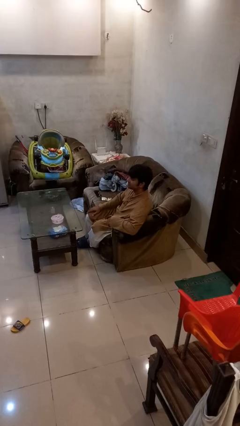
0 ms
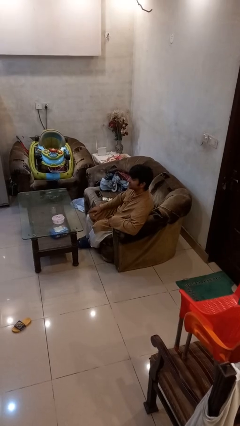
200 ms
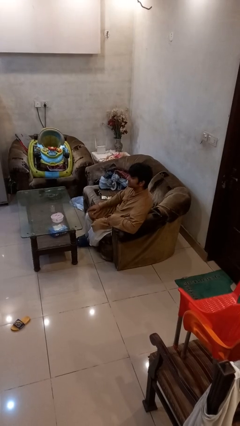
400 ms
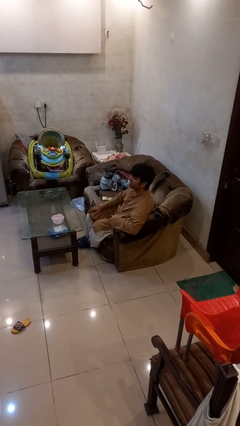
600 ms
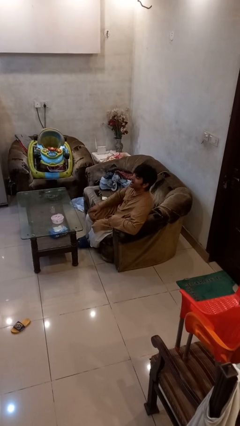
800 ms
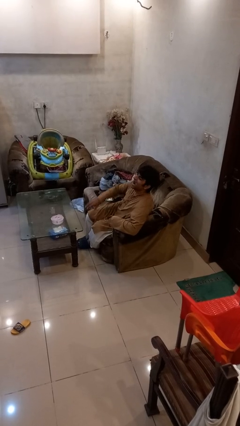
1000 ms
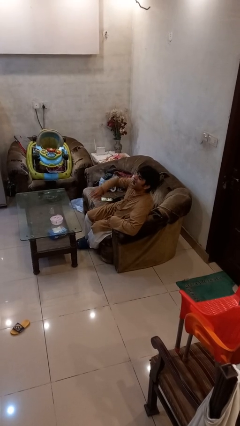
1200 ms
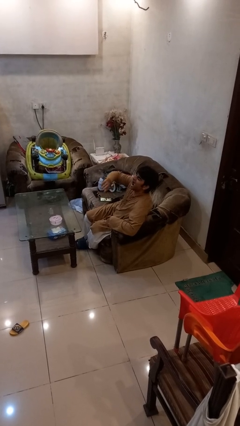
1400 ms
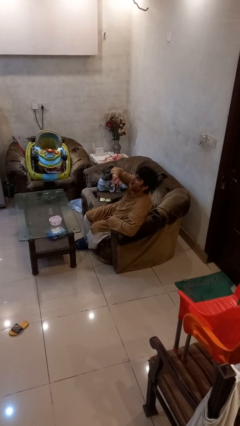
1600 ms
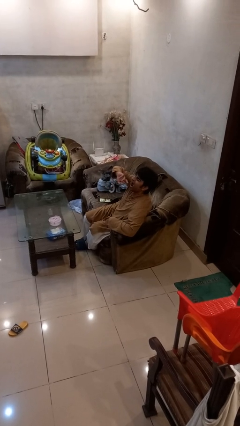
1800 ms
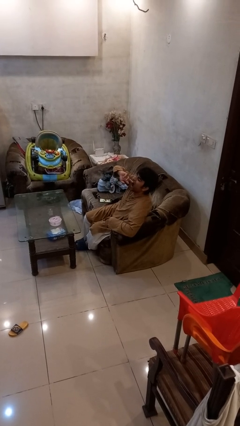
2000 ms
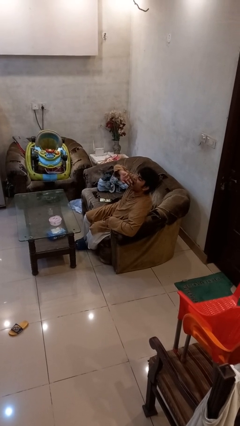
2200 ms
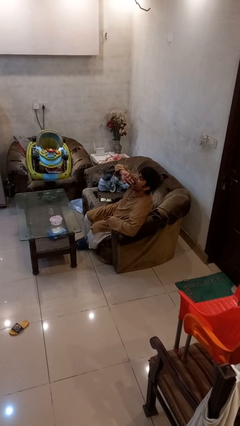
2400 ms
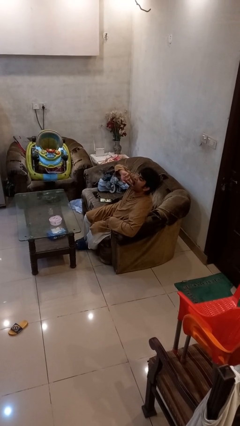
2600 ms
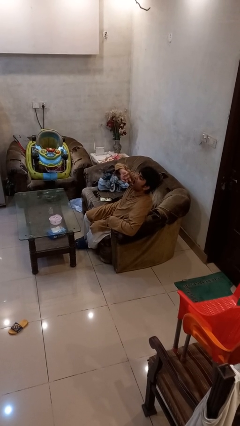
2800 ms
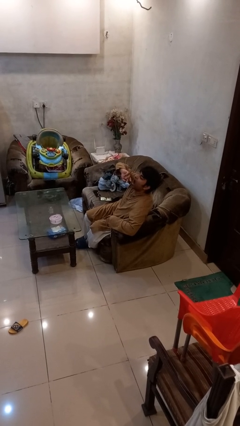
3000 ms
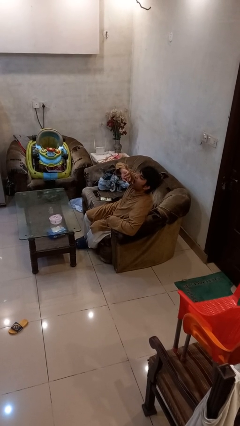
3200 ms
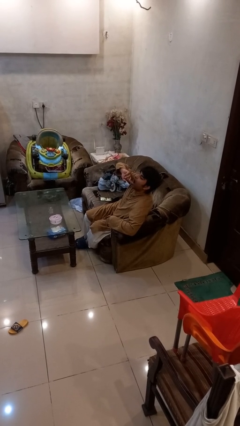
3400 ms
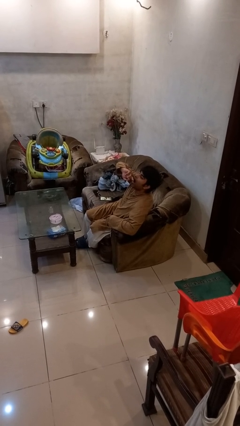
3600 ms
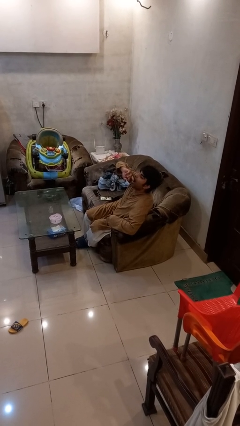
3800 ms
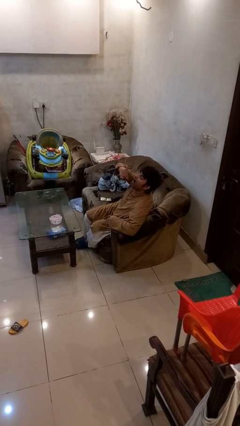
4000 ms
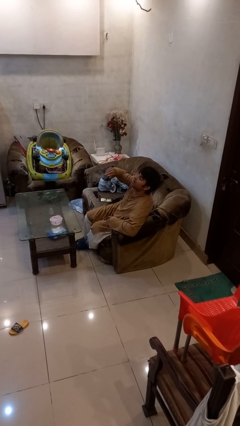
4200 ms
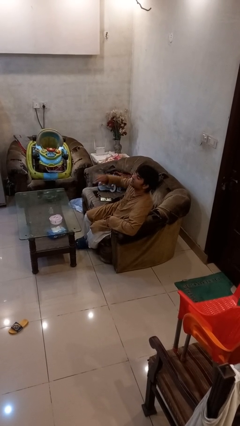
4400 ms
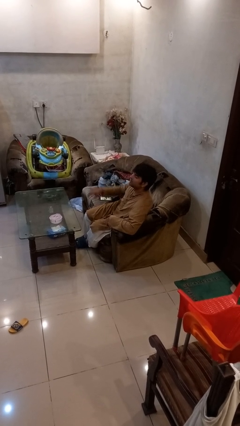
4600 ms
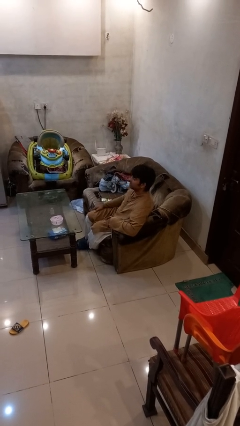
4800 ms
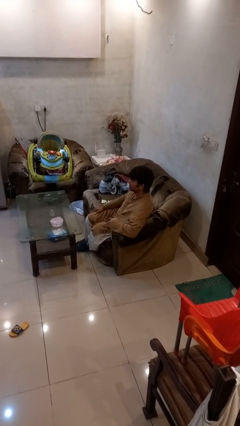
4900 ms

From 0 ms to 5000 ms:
person yawns

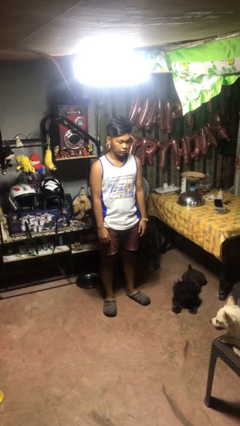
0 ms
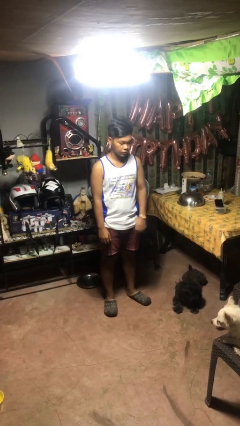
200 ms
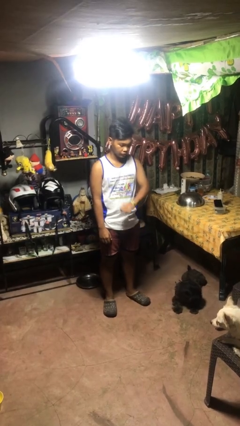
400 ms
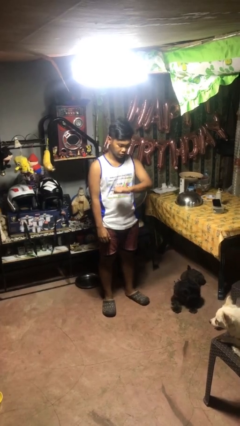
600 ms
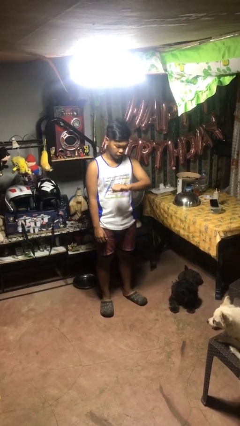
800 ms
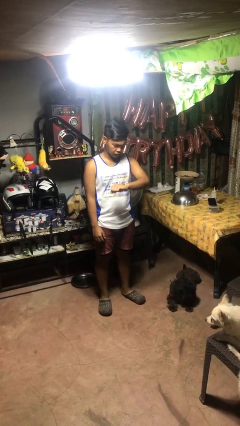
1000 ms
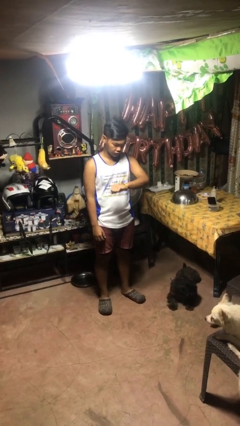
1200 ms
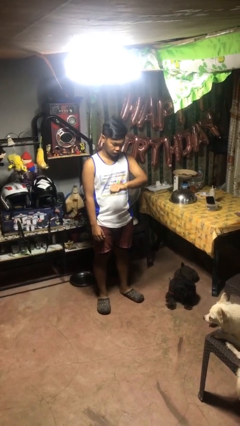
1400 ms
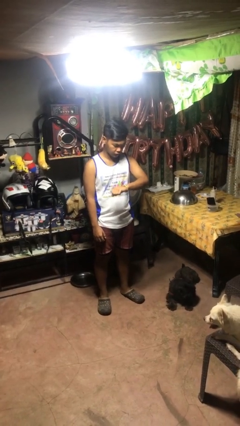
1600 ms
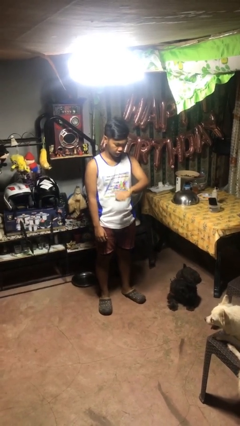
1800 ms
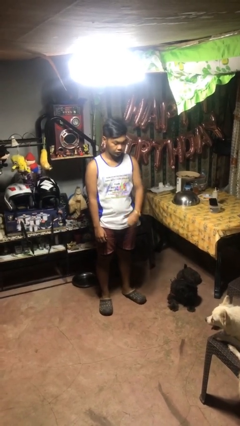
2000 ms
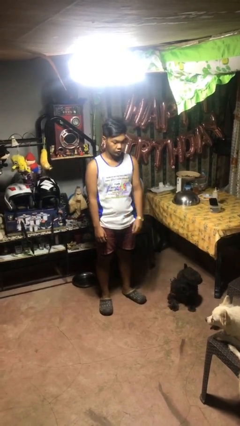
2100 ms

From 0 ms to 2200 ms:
person looks at wristwatch

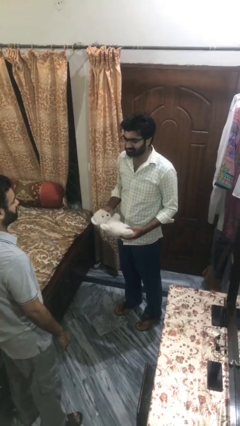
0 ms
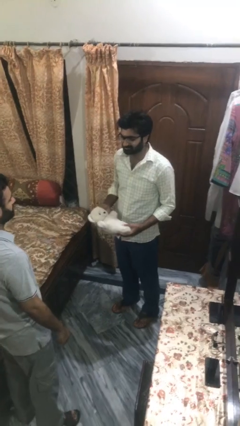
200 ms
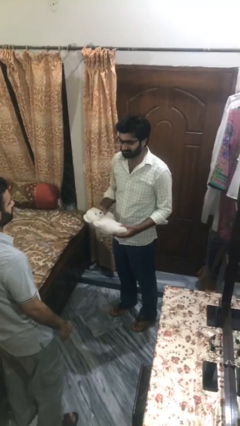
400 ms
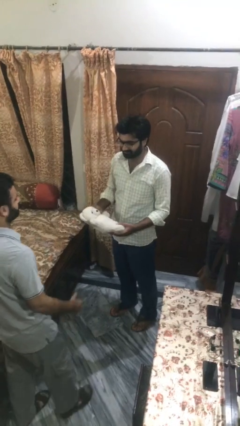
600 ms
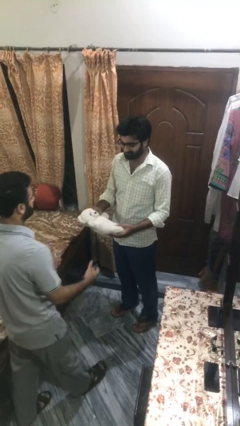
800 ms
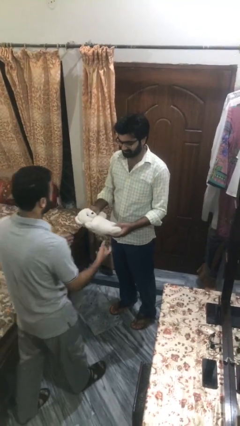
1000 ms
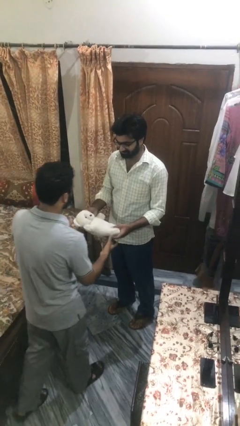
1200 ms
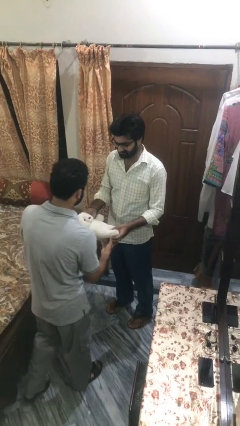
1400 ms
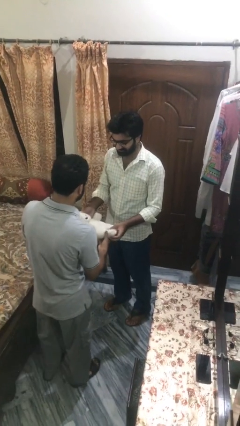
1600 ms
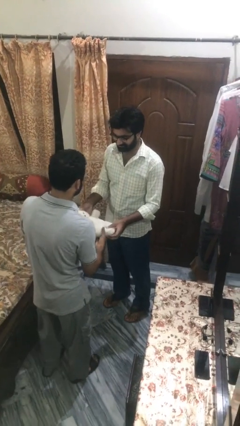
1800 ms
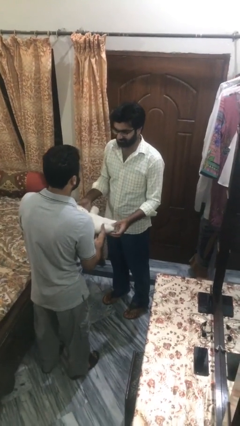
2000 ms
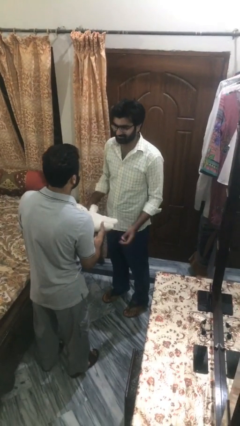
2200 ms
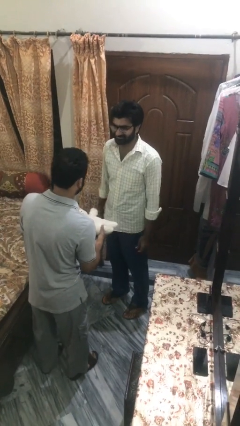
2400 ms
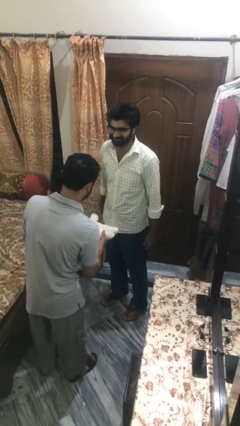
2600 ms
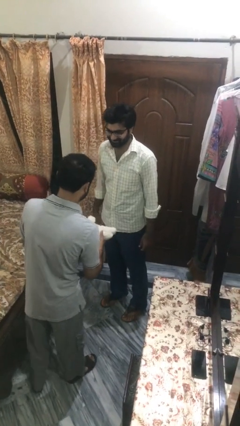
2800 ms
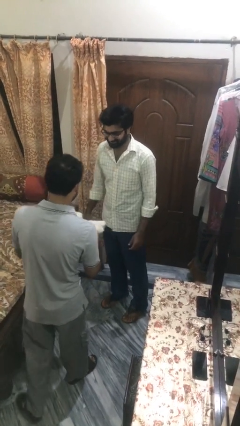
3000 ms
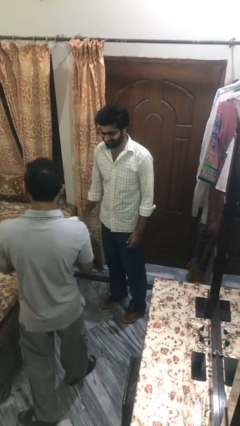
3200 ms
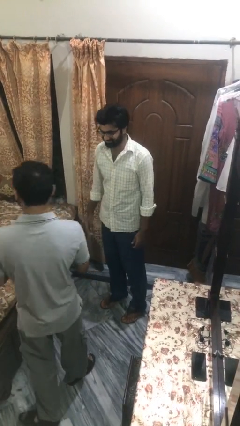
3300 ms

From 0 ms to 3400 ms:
person transfers object to person

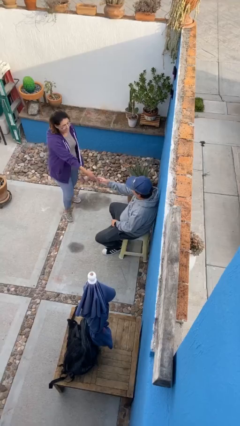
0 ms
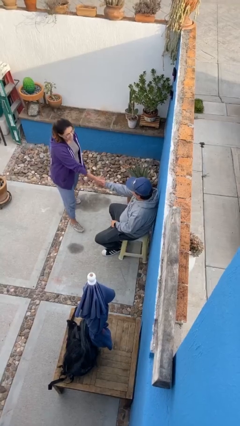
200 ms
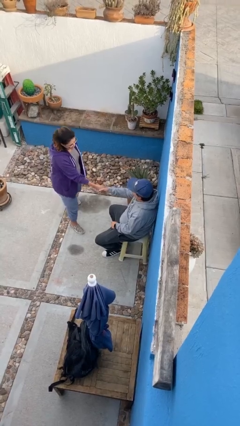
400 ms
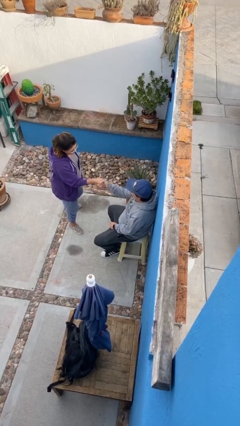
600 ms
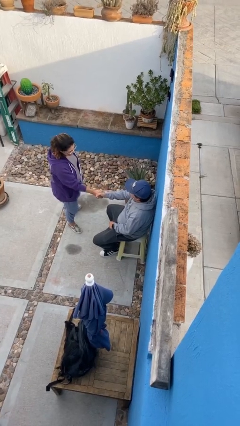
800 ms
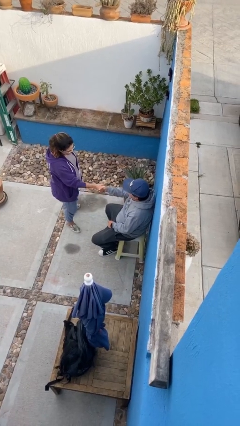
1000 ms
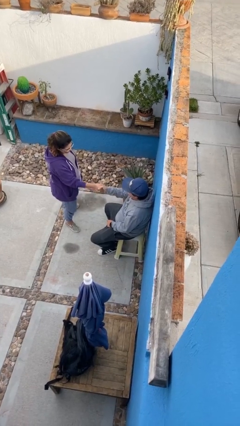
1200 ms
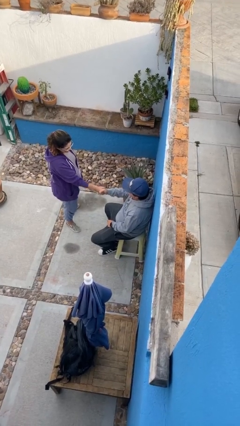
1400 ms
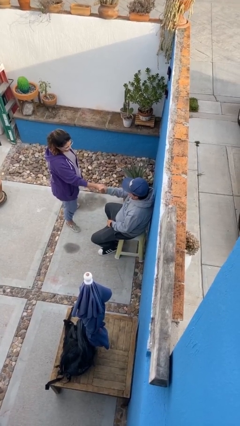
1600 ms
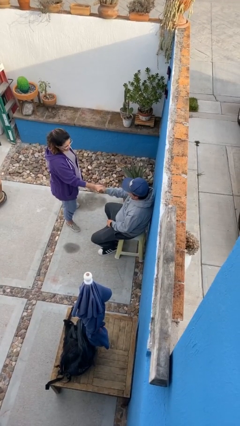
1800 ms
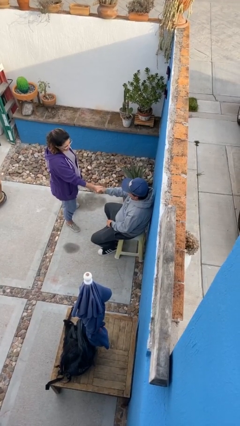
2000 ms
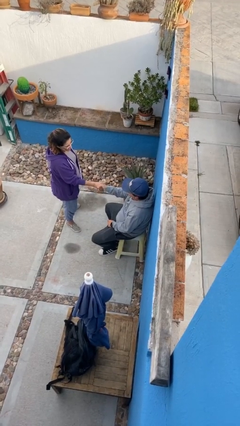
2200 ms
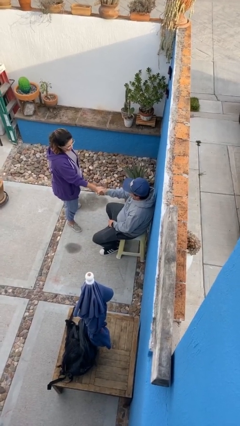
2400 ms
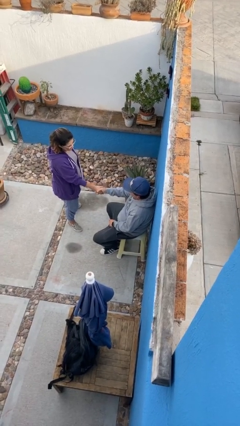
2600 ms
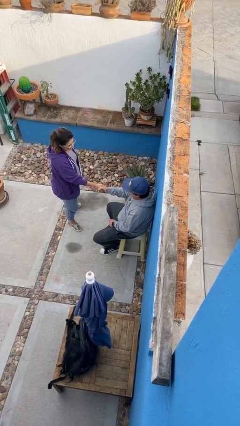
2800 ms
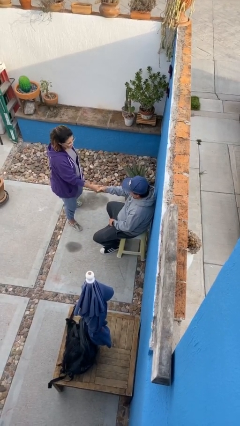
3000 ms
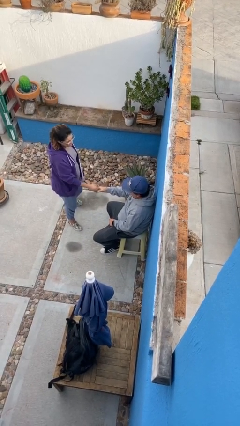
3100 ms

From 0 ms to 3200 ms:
person shakes hand

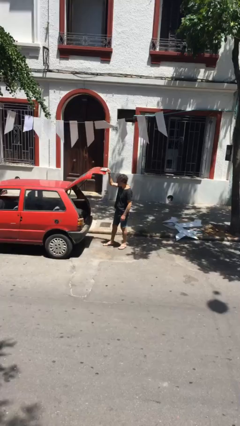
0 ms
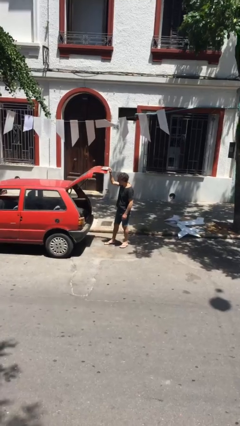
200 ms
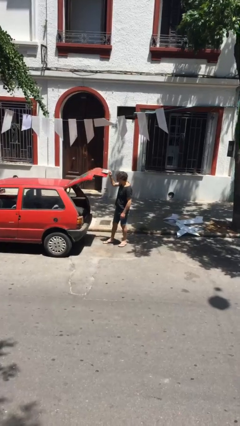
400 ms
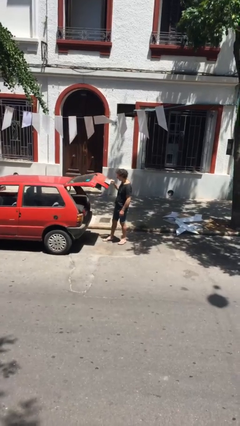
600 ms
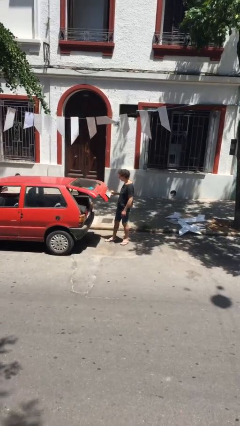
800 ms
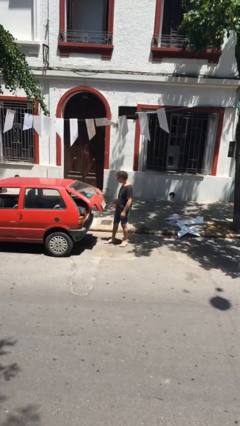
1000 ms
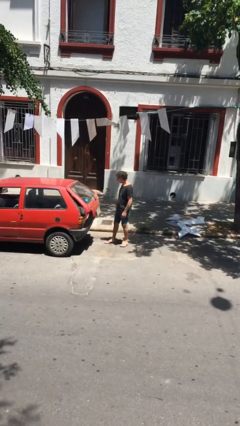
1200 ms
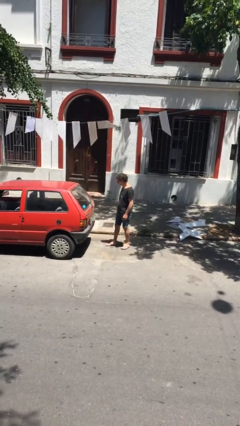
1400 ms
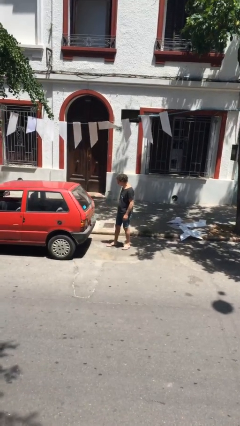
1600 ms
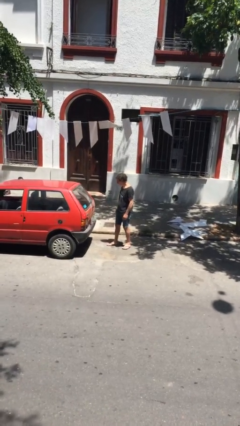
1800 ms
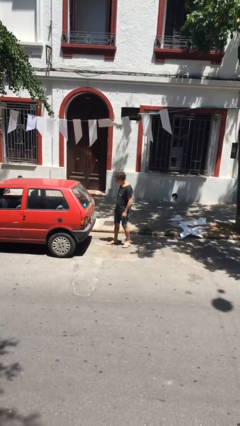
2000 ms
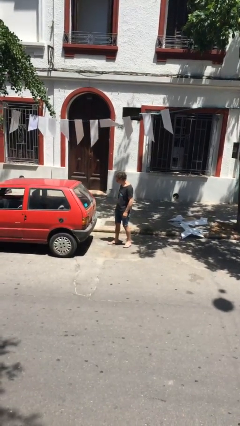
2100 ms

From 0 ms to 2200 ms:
person closes car trunk

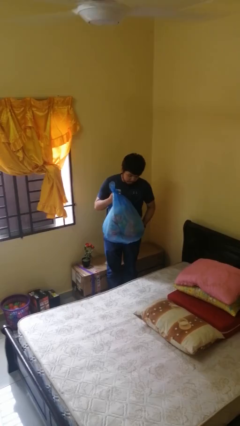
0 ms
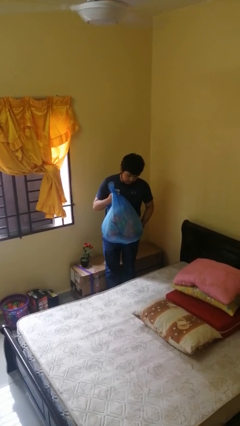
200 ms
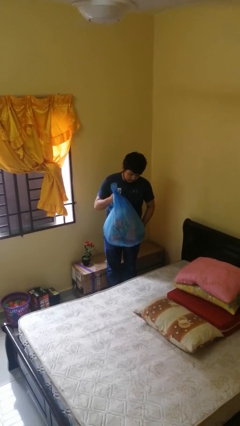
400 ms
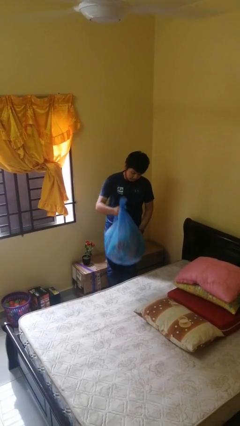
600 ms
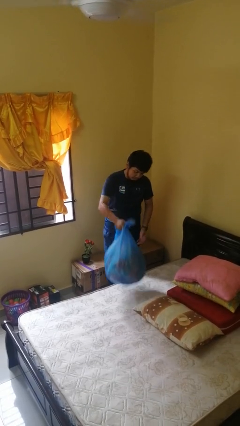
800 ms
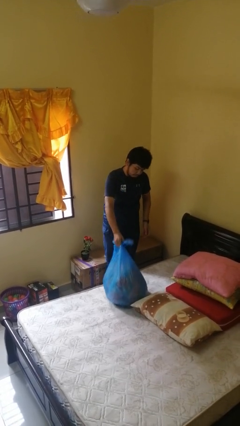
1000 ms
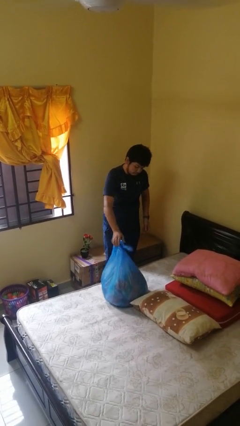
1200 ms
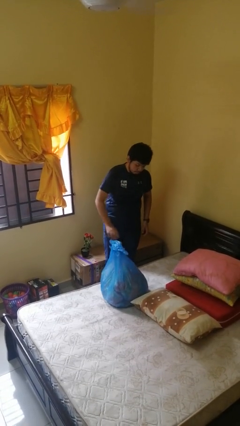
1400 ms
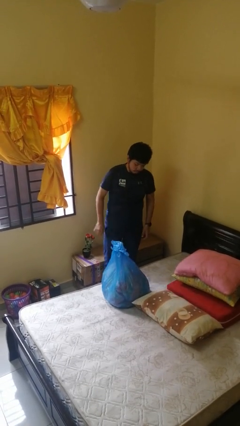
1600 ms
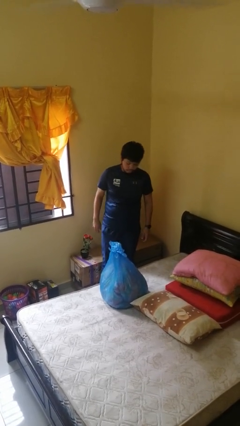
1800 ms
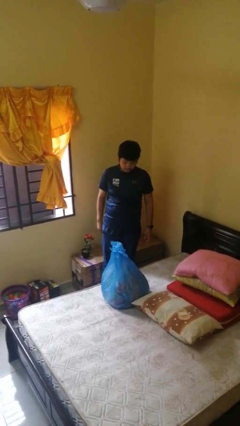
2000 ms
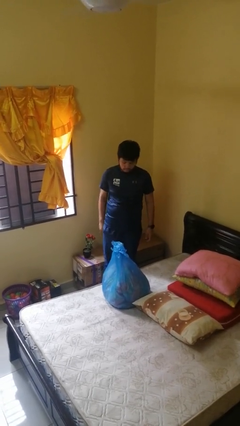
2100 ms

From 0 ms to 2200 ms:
person puts down object on bed
